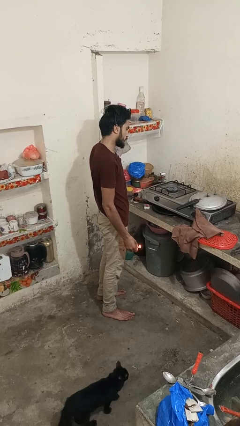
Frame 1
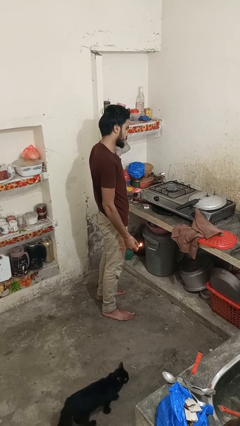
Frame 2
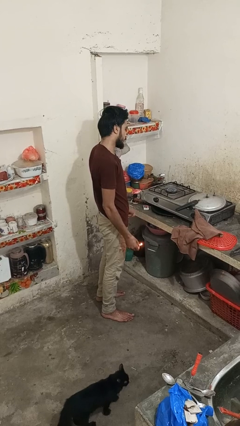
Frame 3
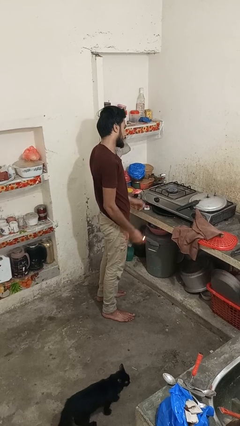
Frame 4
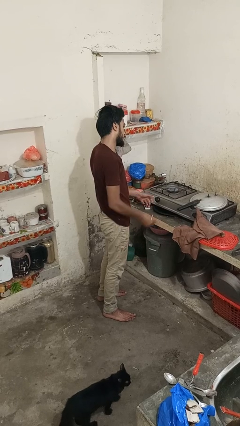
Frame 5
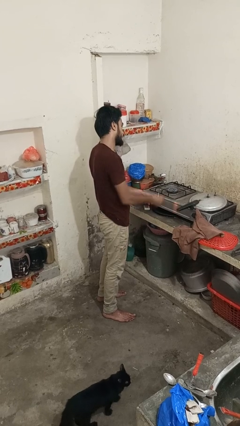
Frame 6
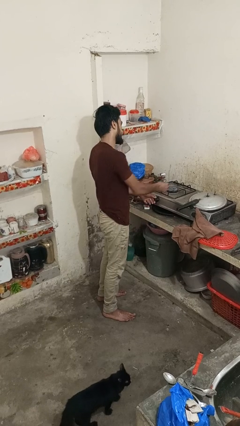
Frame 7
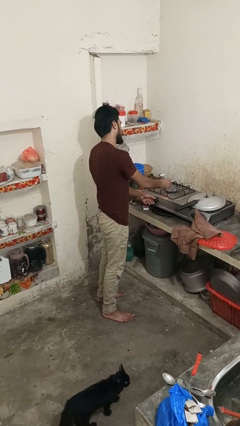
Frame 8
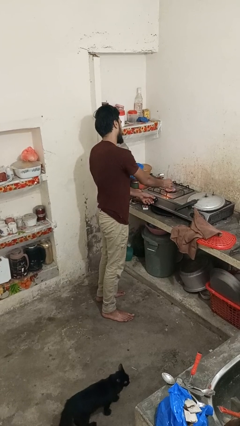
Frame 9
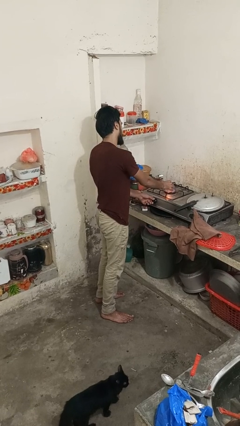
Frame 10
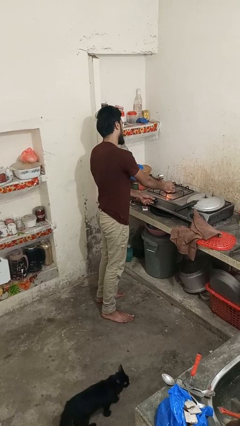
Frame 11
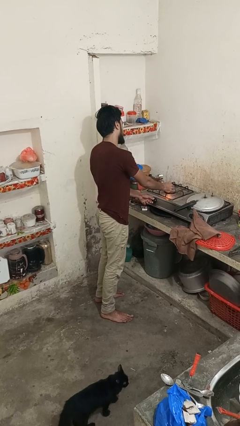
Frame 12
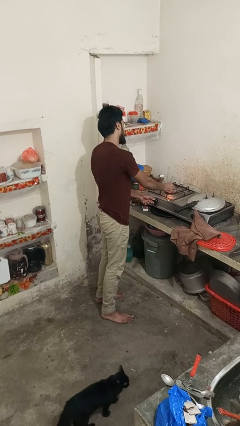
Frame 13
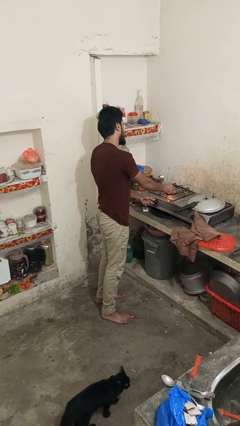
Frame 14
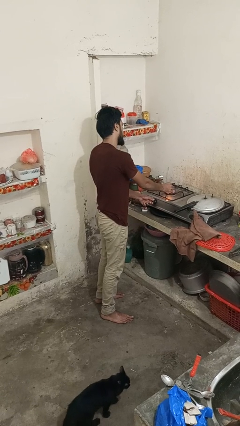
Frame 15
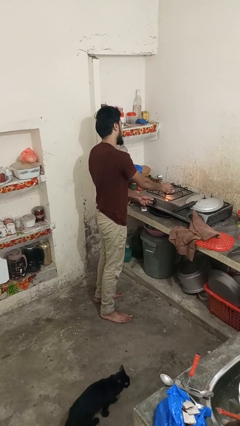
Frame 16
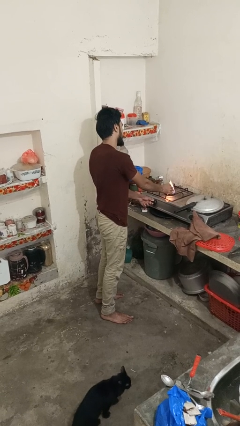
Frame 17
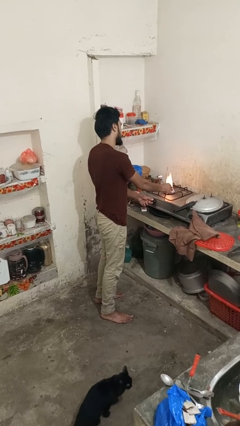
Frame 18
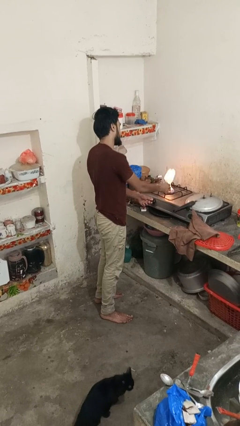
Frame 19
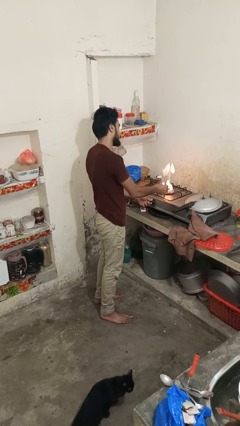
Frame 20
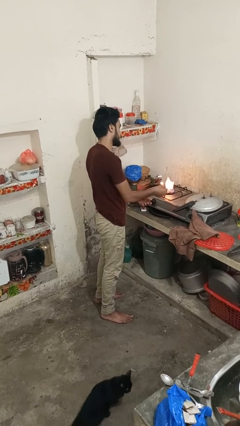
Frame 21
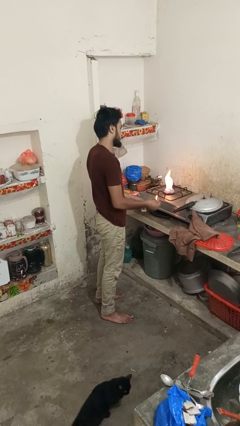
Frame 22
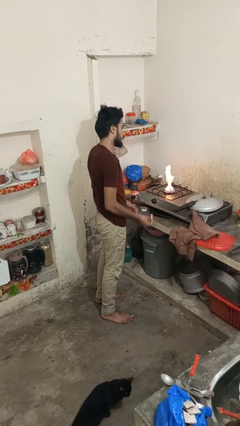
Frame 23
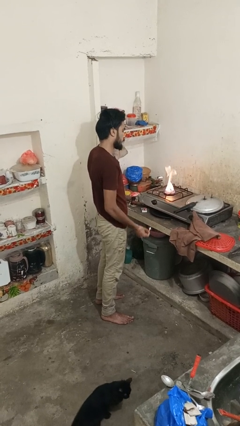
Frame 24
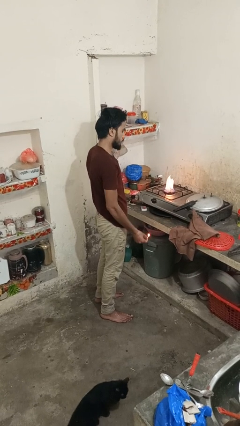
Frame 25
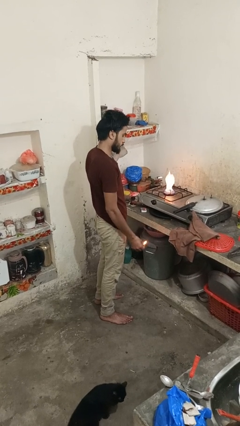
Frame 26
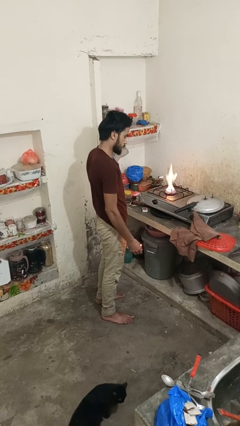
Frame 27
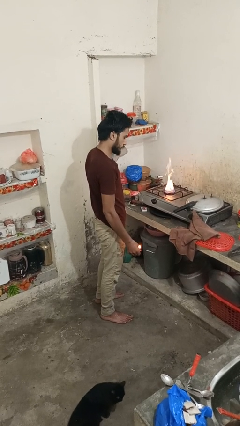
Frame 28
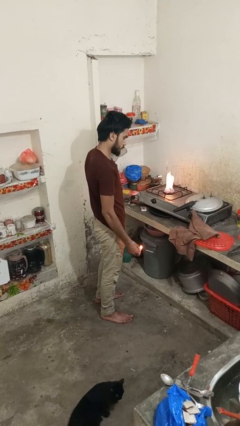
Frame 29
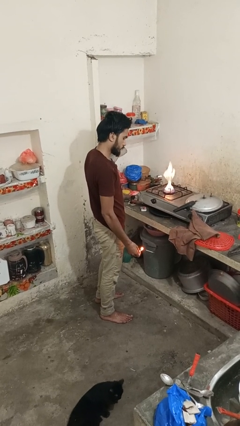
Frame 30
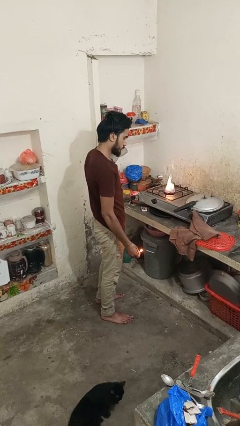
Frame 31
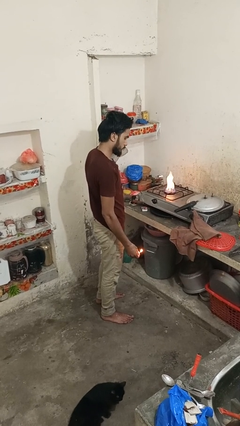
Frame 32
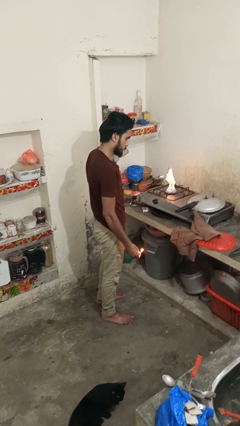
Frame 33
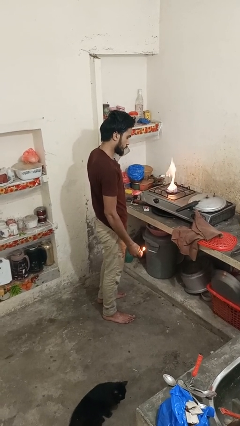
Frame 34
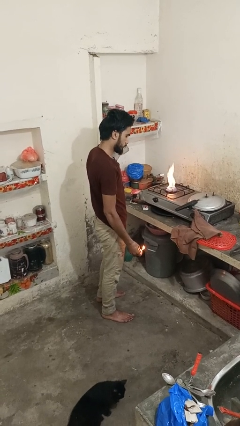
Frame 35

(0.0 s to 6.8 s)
person turns on stovetop

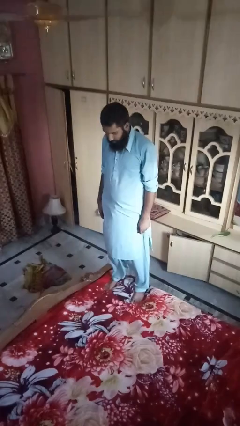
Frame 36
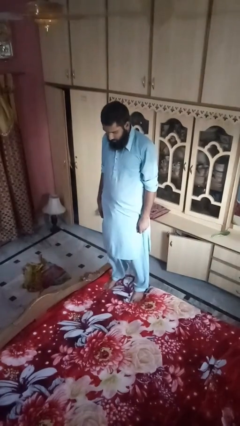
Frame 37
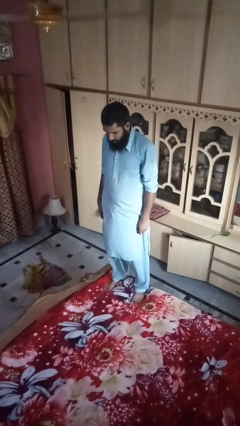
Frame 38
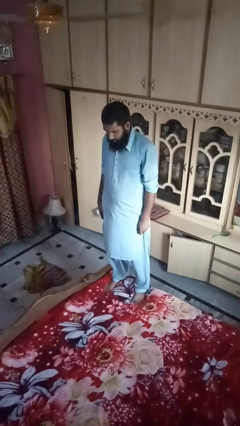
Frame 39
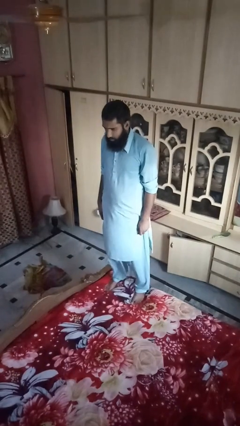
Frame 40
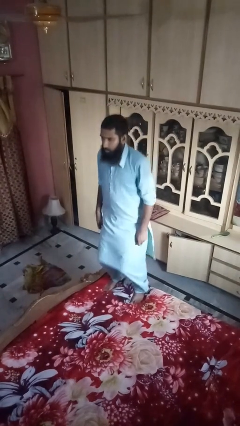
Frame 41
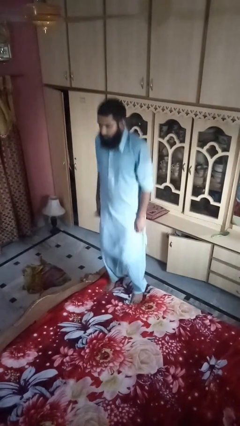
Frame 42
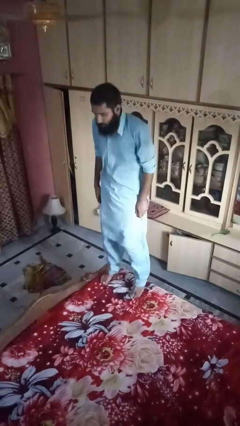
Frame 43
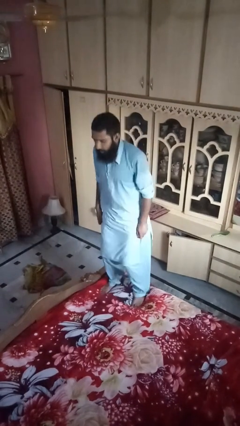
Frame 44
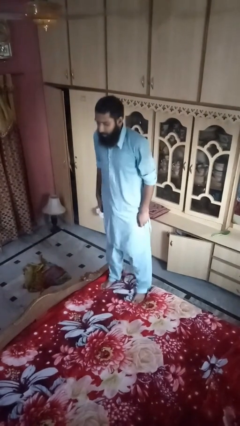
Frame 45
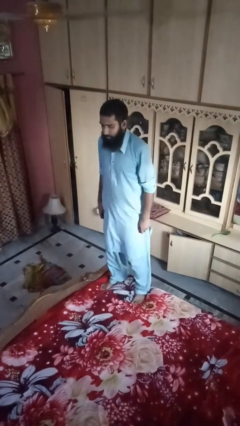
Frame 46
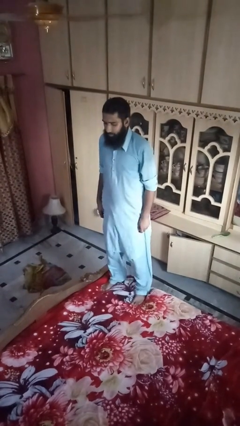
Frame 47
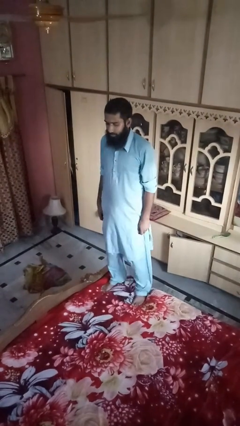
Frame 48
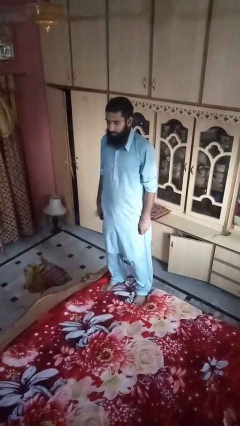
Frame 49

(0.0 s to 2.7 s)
person jumps on bed

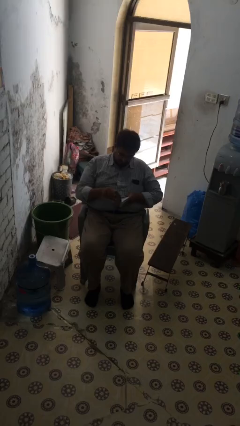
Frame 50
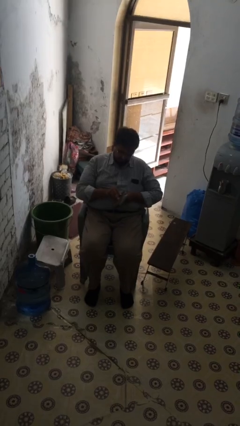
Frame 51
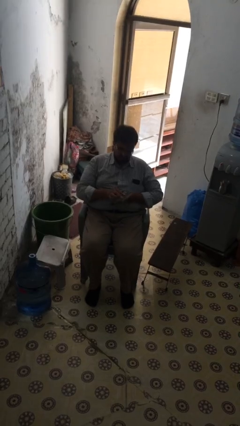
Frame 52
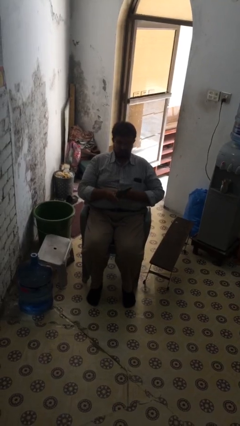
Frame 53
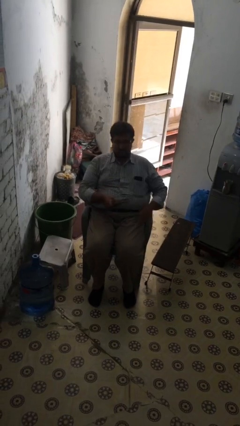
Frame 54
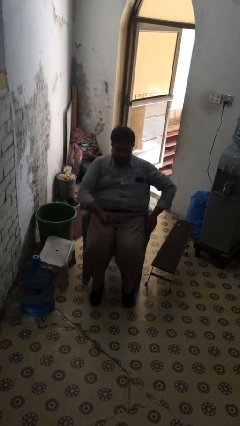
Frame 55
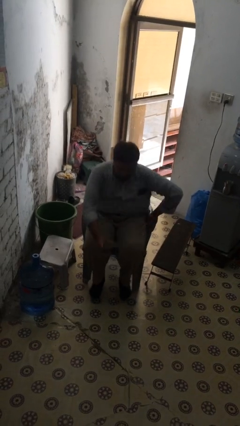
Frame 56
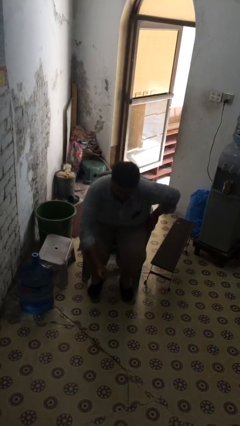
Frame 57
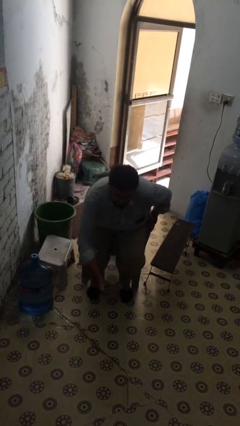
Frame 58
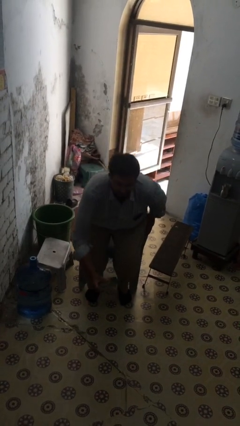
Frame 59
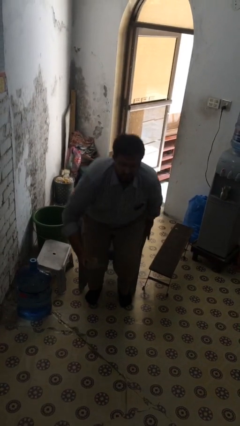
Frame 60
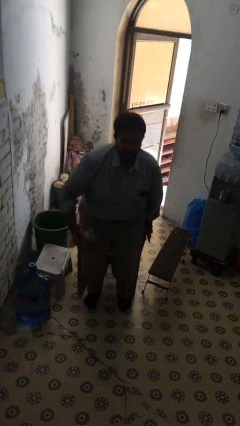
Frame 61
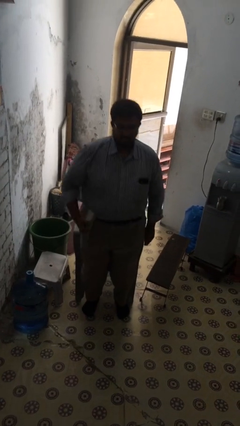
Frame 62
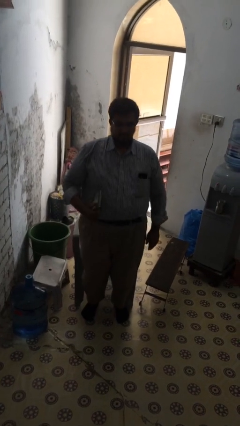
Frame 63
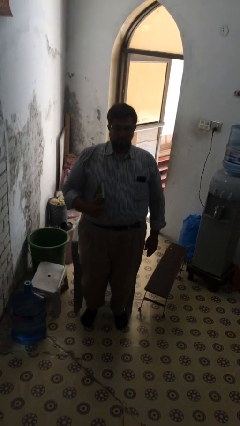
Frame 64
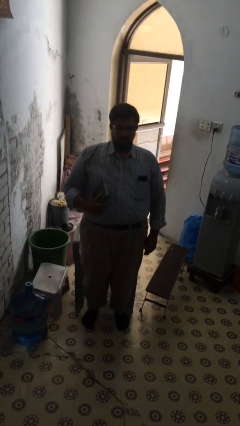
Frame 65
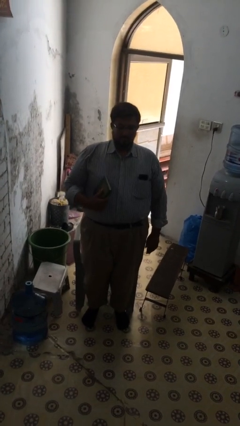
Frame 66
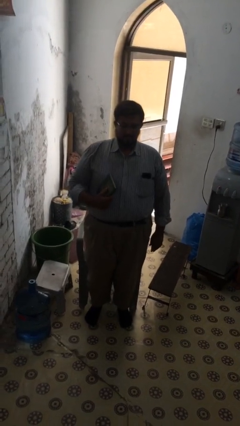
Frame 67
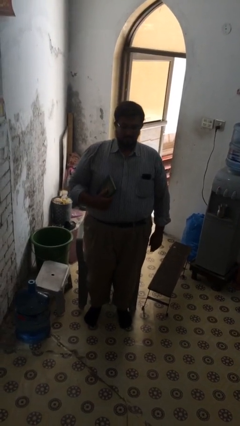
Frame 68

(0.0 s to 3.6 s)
person stands up

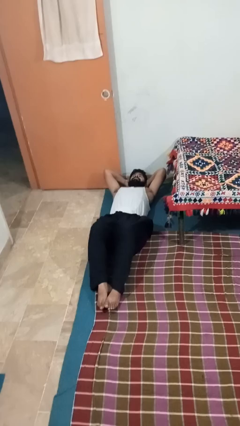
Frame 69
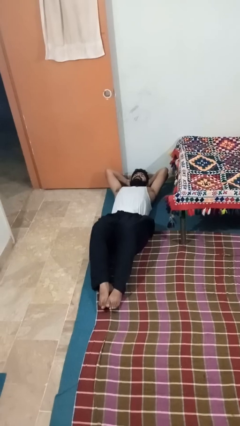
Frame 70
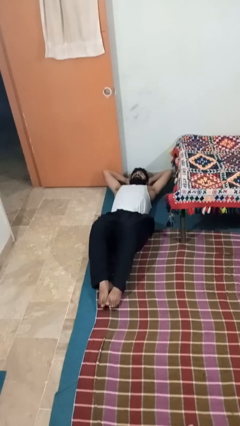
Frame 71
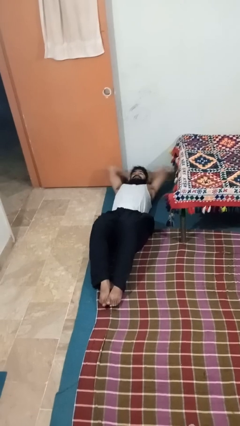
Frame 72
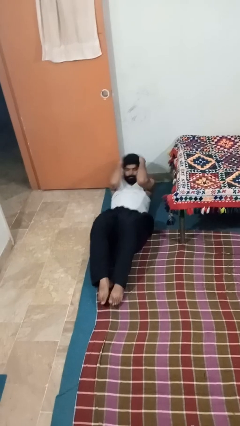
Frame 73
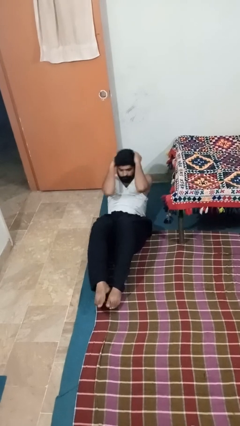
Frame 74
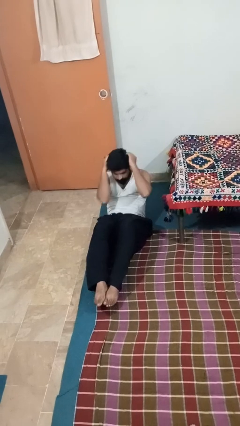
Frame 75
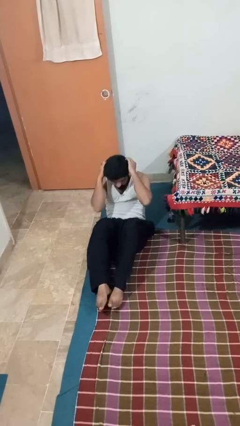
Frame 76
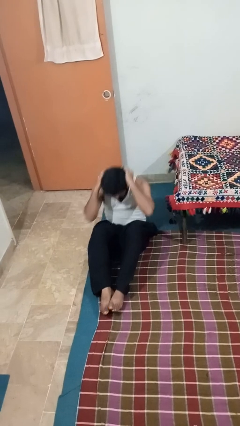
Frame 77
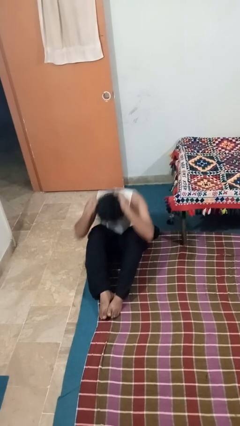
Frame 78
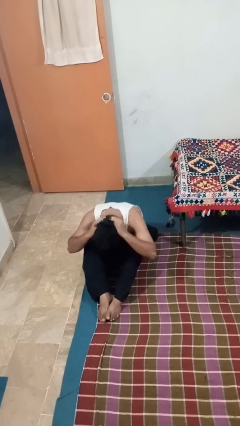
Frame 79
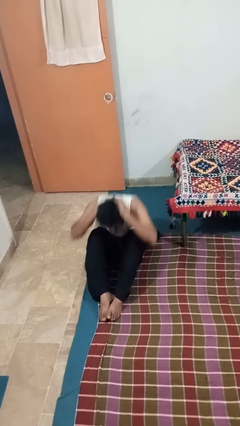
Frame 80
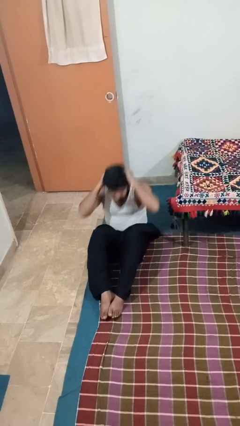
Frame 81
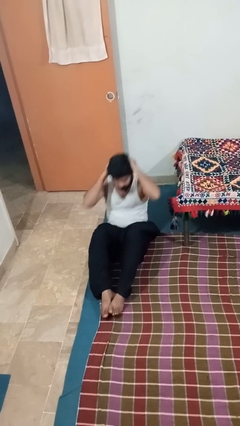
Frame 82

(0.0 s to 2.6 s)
person exercises with situp

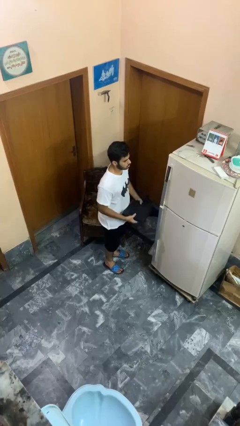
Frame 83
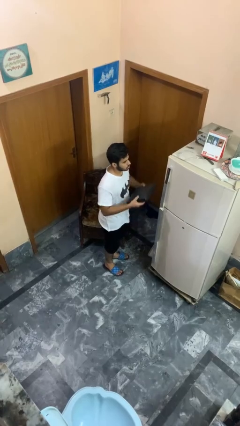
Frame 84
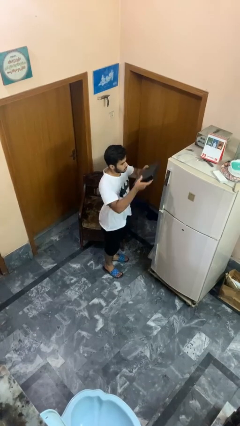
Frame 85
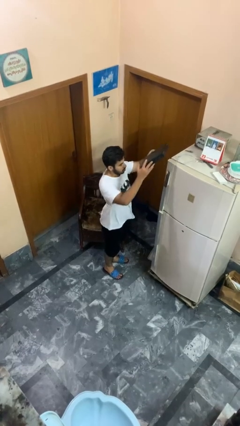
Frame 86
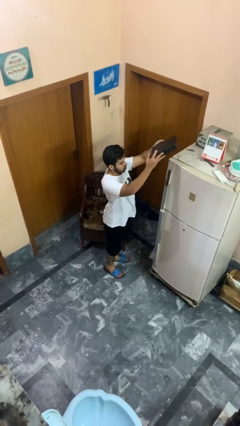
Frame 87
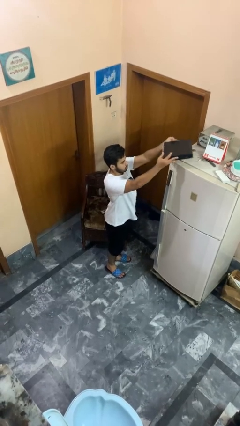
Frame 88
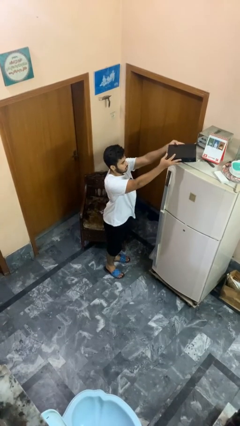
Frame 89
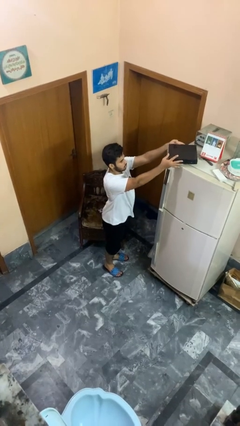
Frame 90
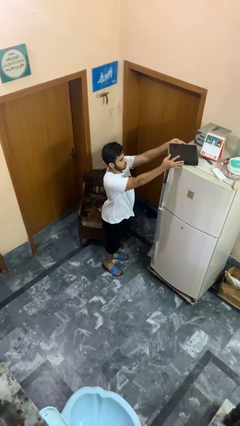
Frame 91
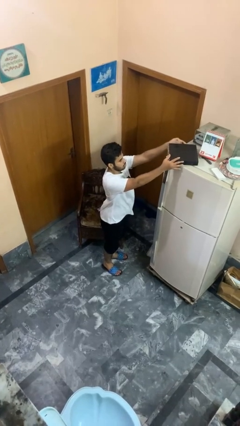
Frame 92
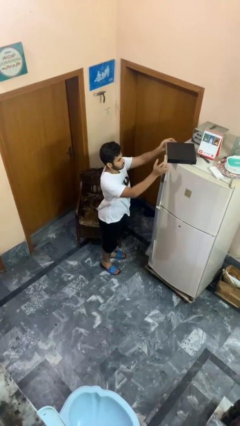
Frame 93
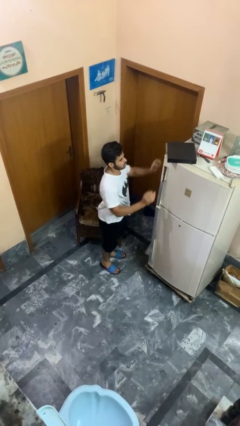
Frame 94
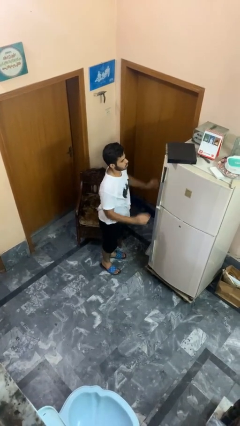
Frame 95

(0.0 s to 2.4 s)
person puts down object on countertop
